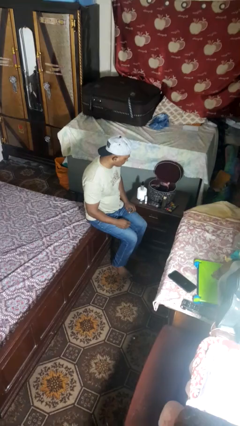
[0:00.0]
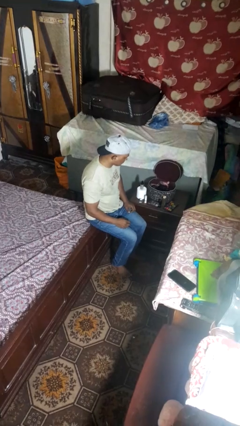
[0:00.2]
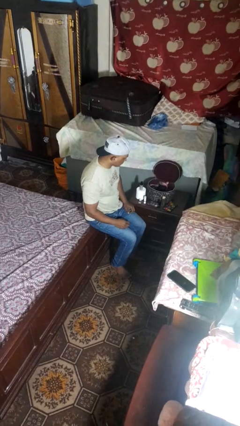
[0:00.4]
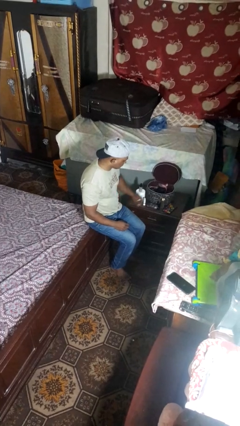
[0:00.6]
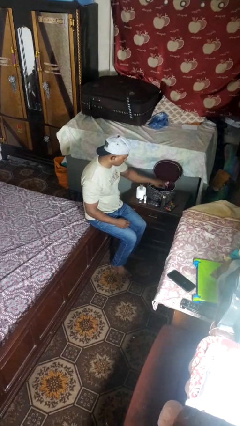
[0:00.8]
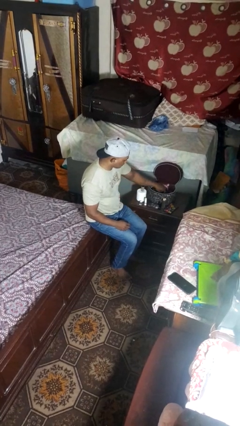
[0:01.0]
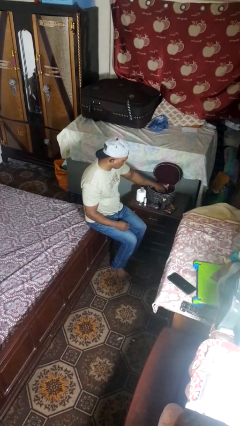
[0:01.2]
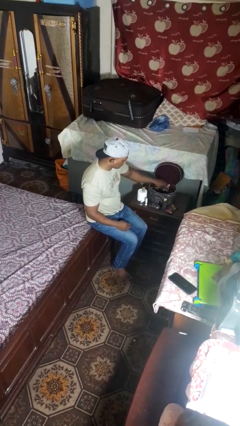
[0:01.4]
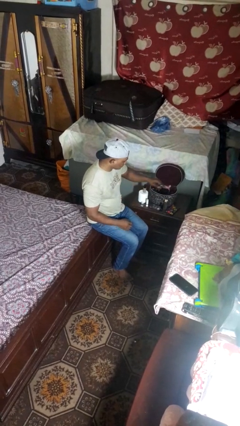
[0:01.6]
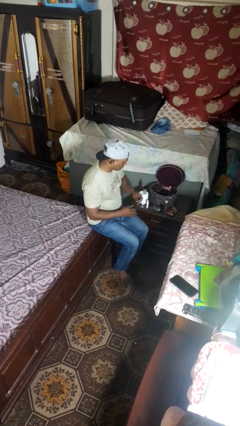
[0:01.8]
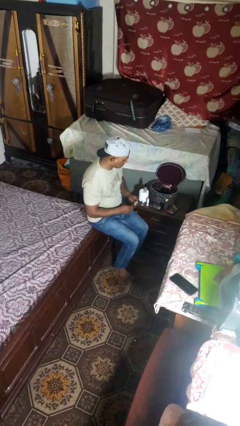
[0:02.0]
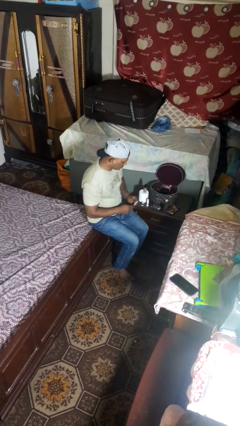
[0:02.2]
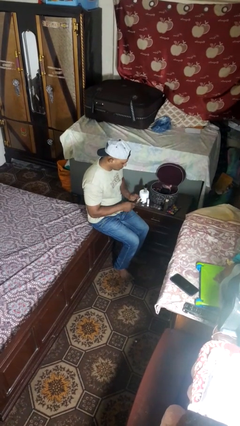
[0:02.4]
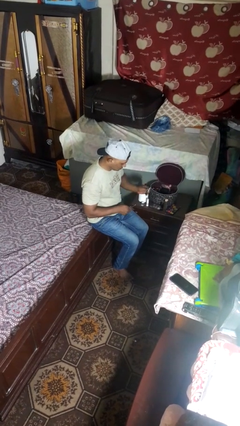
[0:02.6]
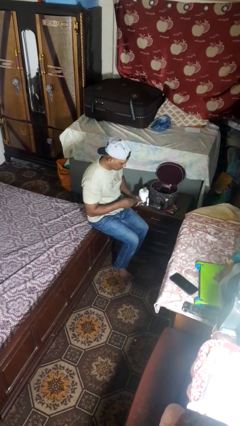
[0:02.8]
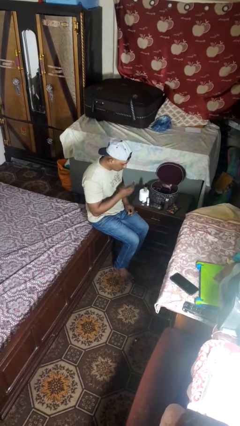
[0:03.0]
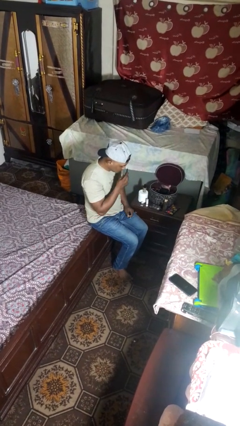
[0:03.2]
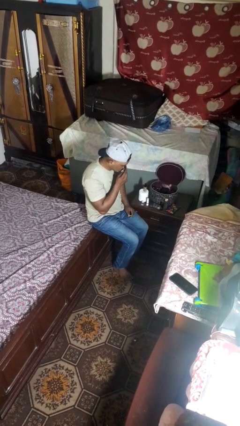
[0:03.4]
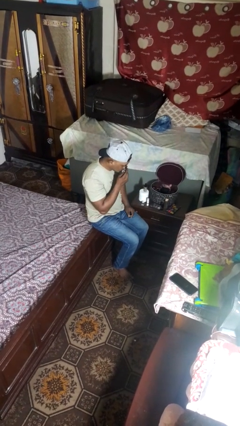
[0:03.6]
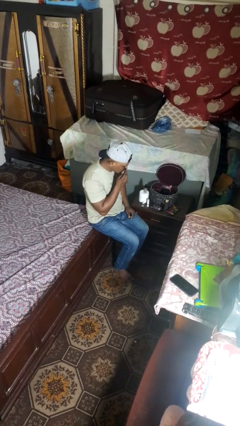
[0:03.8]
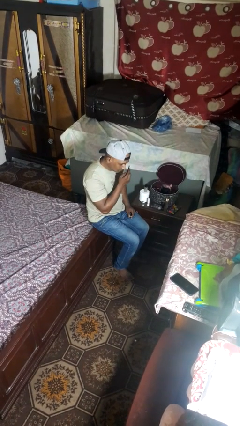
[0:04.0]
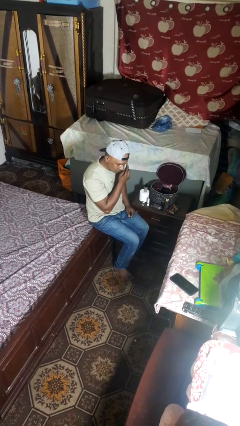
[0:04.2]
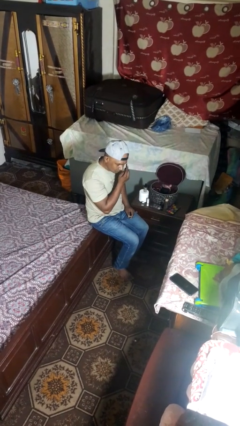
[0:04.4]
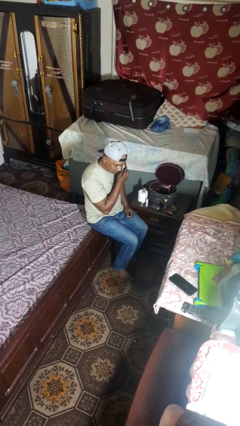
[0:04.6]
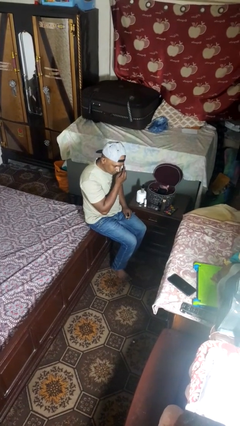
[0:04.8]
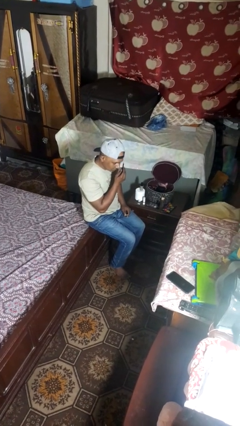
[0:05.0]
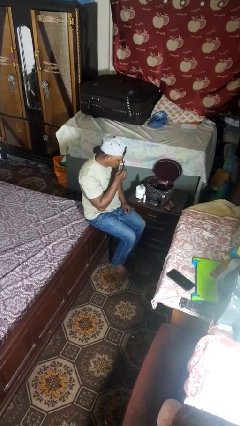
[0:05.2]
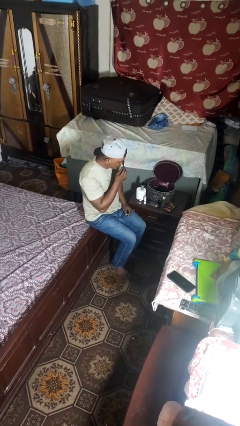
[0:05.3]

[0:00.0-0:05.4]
person applies eye makeup

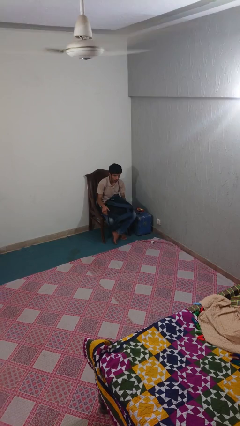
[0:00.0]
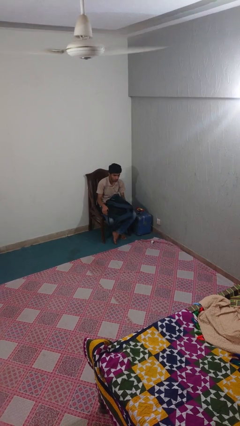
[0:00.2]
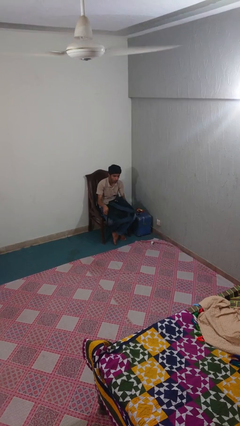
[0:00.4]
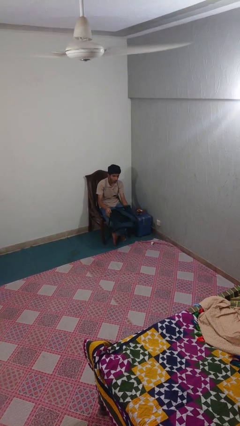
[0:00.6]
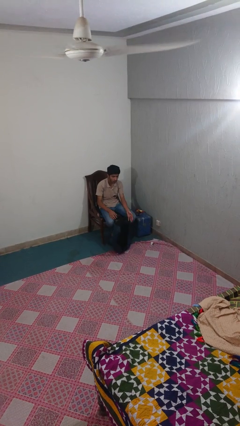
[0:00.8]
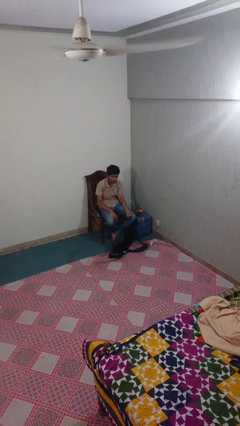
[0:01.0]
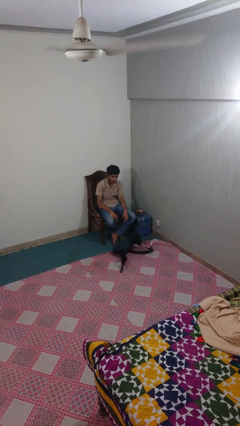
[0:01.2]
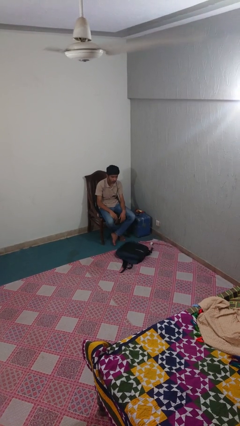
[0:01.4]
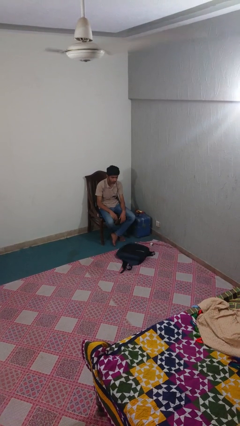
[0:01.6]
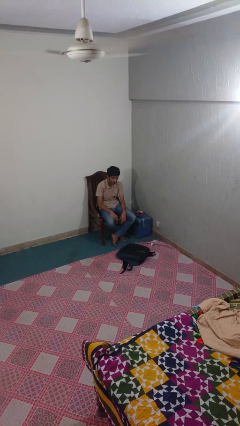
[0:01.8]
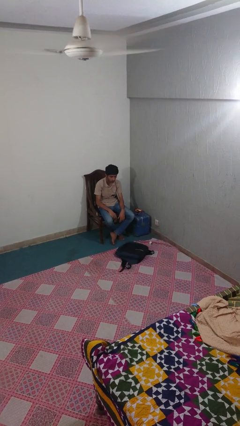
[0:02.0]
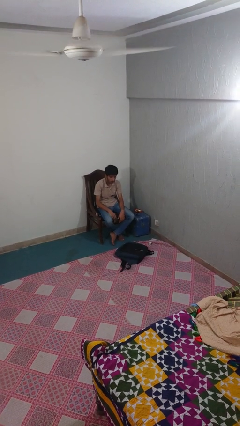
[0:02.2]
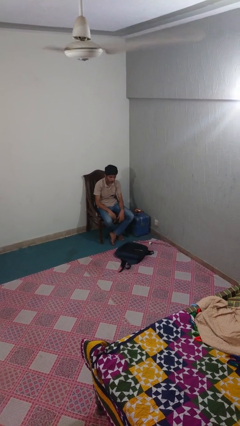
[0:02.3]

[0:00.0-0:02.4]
person drops object

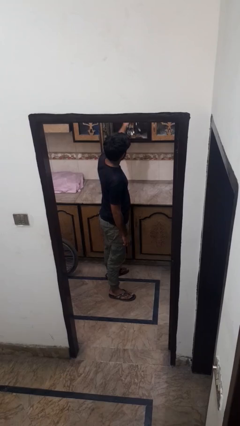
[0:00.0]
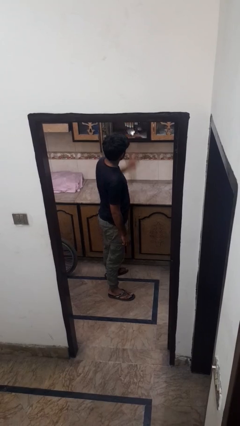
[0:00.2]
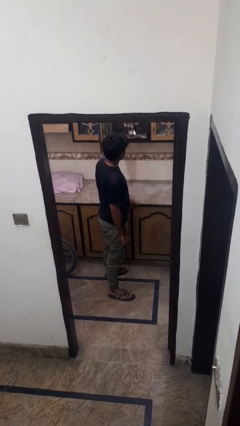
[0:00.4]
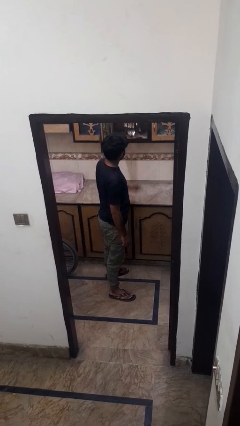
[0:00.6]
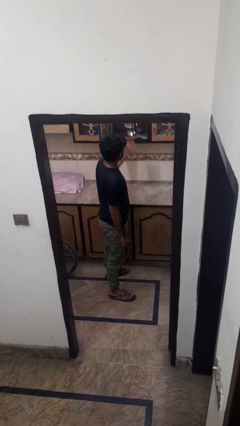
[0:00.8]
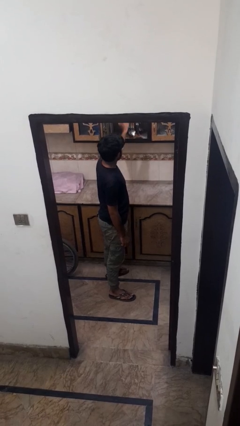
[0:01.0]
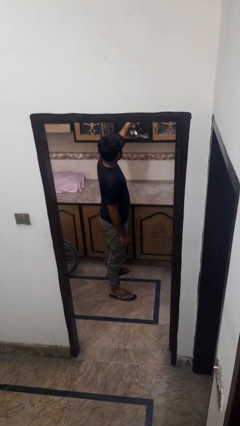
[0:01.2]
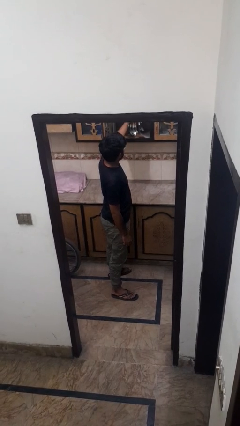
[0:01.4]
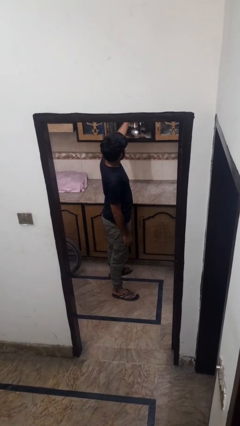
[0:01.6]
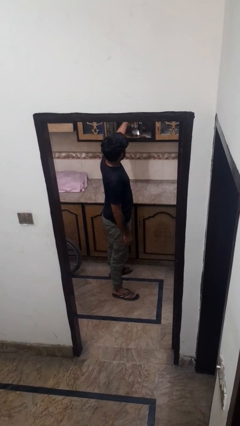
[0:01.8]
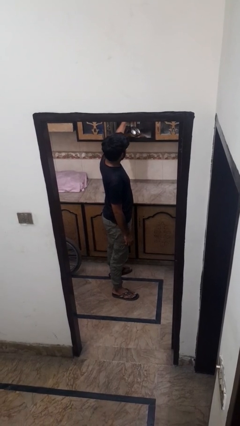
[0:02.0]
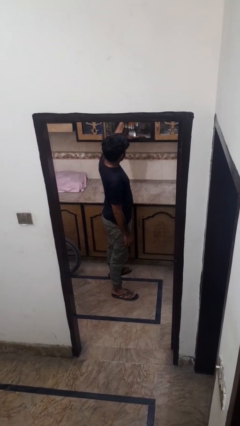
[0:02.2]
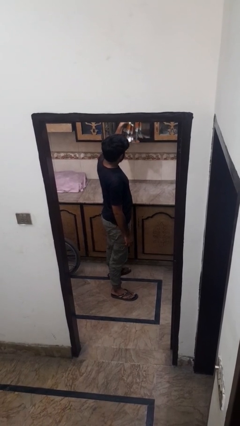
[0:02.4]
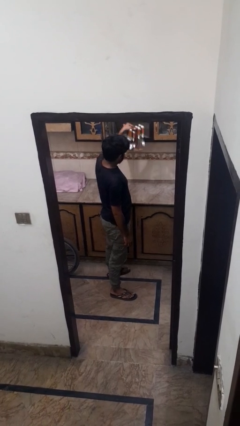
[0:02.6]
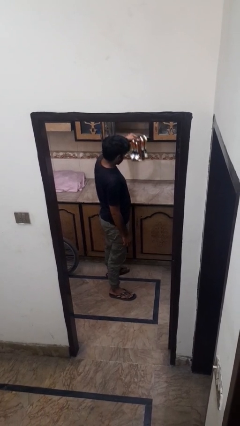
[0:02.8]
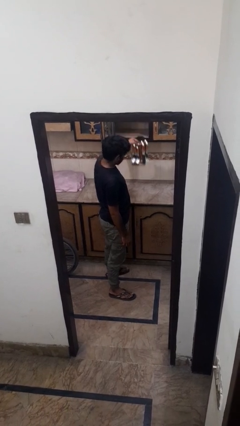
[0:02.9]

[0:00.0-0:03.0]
person picks up object from cabinet

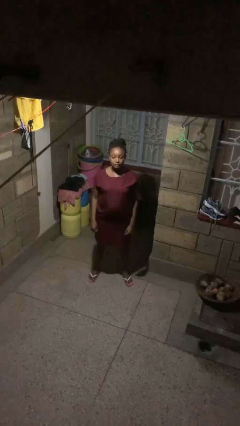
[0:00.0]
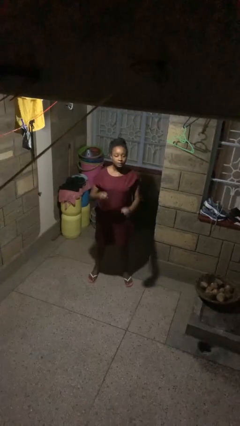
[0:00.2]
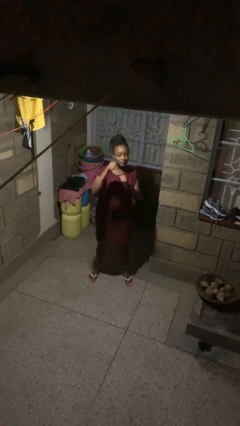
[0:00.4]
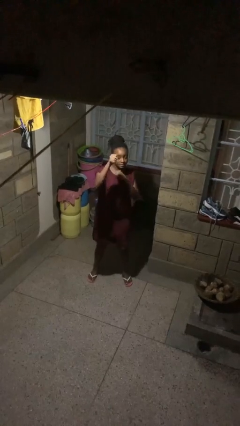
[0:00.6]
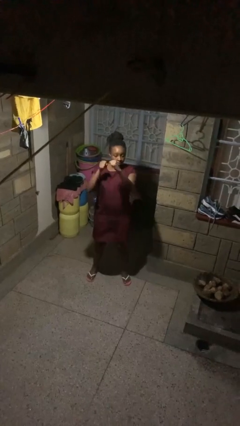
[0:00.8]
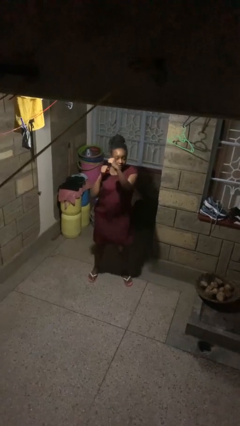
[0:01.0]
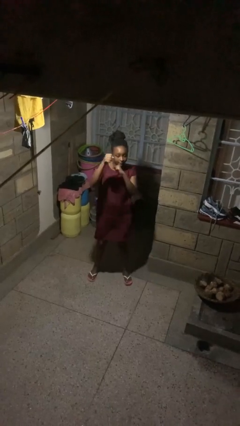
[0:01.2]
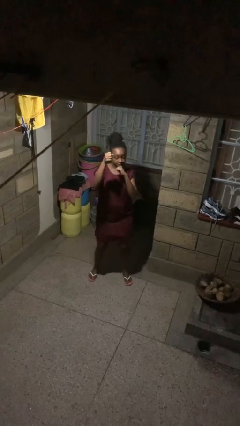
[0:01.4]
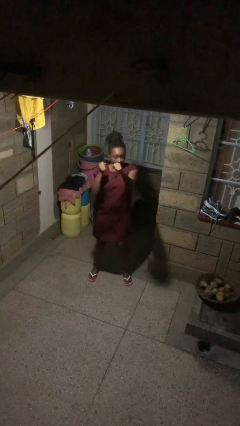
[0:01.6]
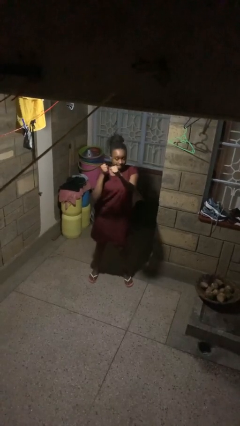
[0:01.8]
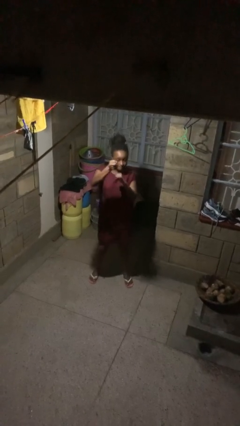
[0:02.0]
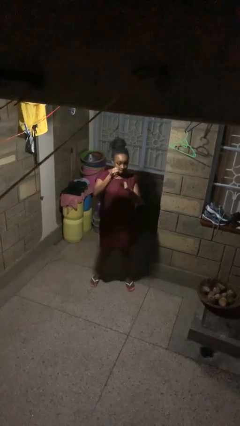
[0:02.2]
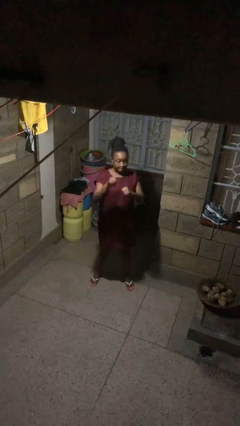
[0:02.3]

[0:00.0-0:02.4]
person punches

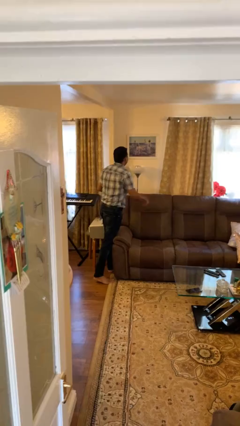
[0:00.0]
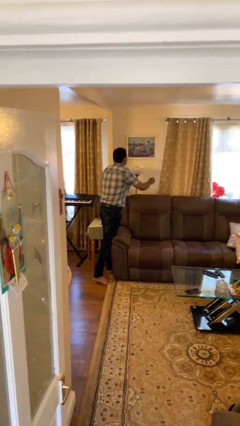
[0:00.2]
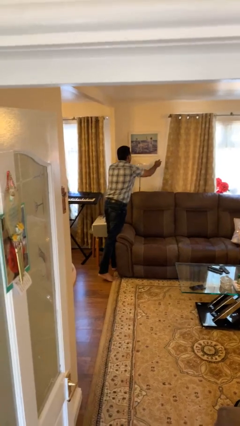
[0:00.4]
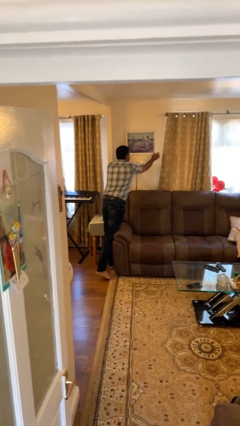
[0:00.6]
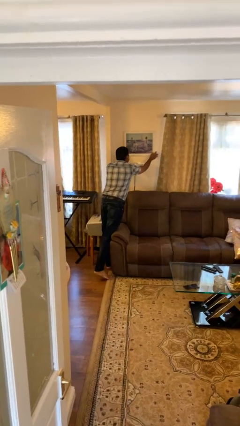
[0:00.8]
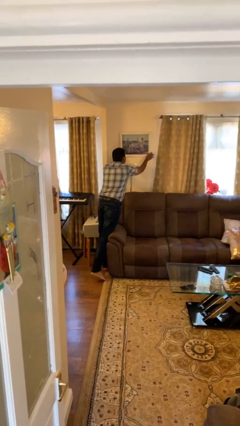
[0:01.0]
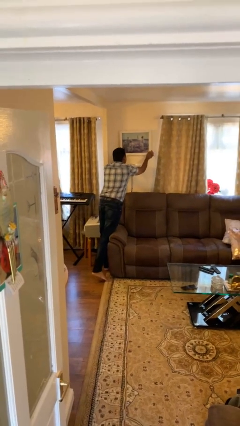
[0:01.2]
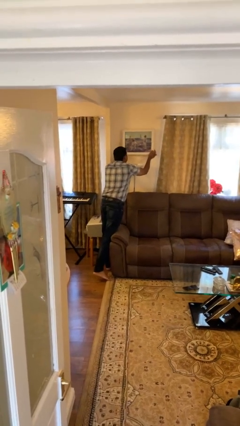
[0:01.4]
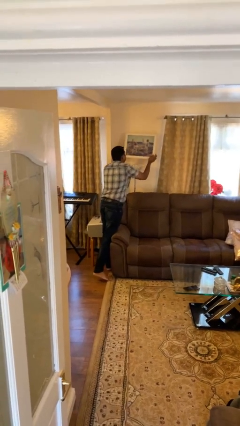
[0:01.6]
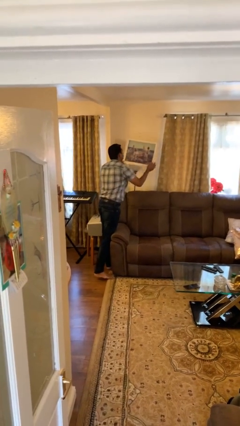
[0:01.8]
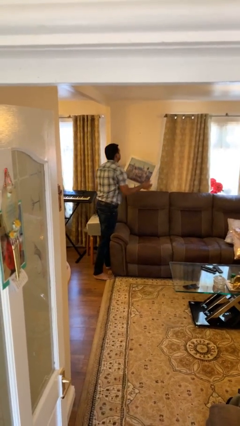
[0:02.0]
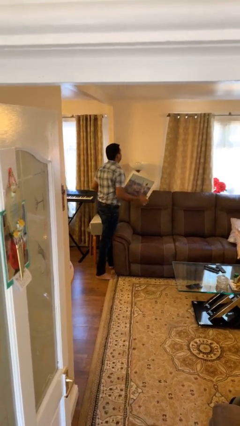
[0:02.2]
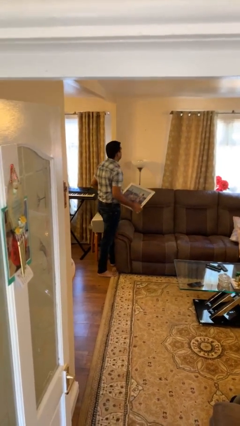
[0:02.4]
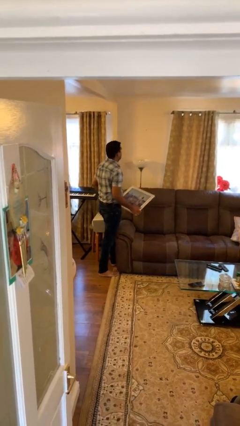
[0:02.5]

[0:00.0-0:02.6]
person takes down picture frame

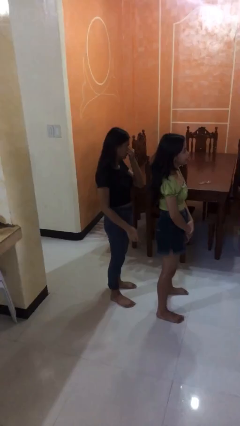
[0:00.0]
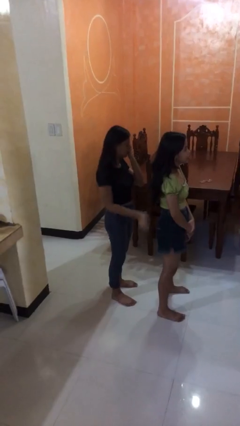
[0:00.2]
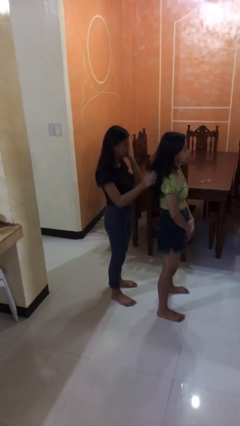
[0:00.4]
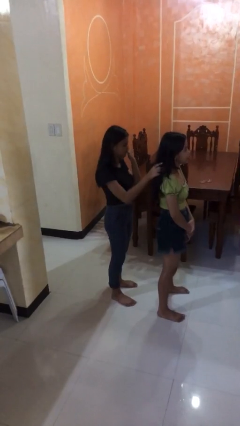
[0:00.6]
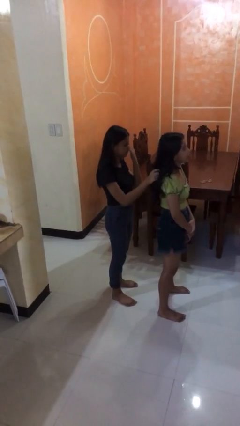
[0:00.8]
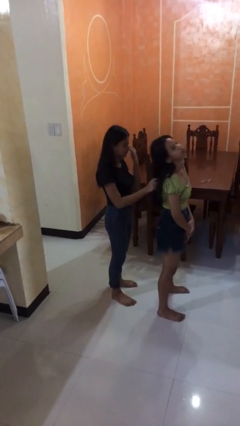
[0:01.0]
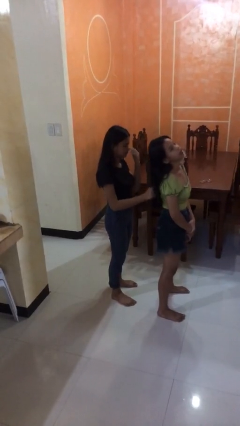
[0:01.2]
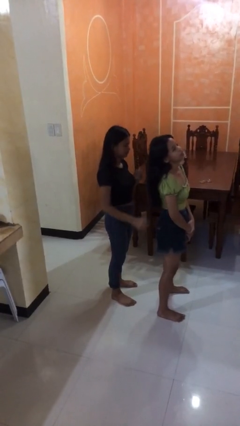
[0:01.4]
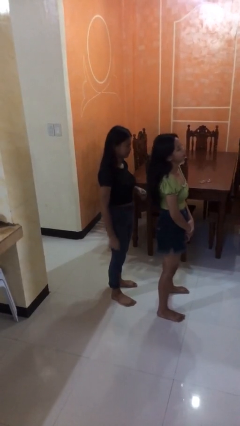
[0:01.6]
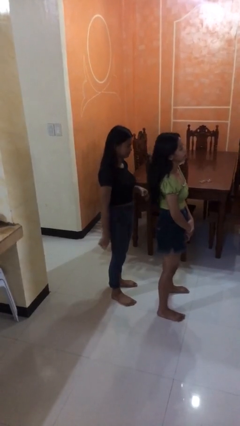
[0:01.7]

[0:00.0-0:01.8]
person grabs person by hair
